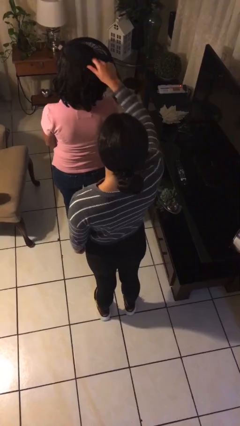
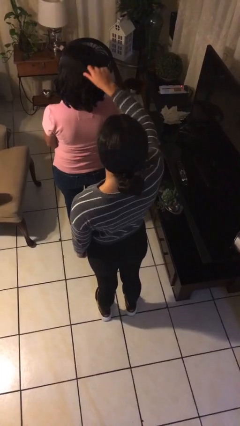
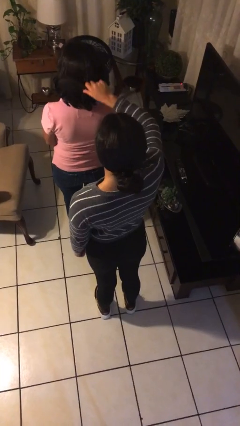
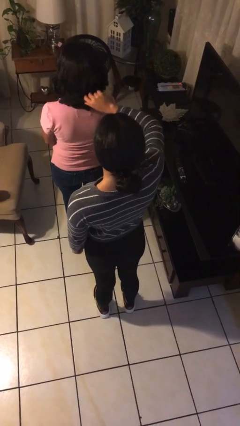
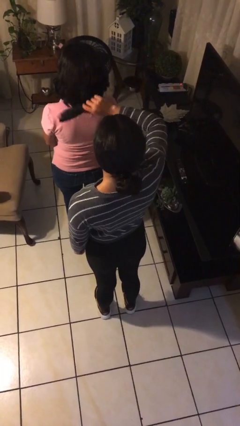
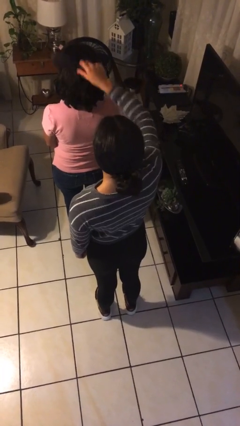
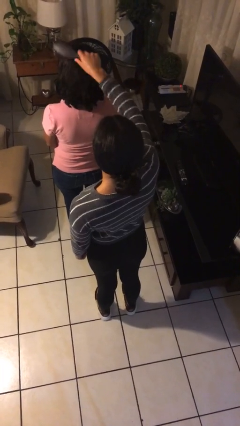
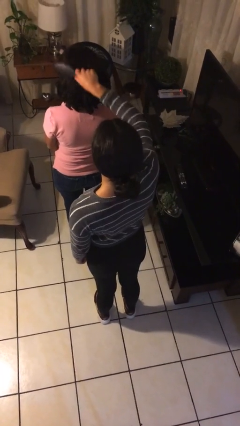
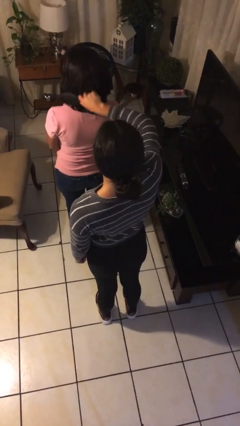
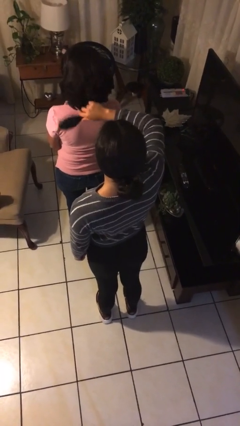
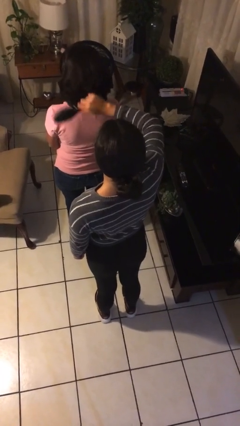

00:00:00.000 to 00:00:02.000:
person brushes hair of person

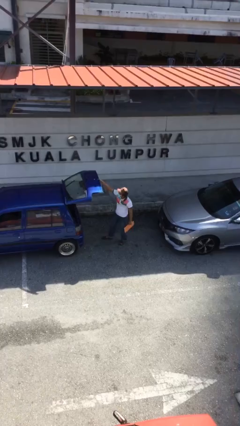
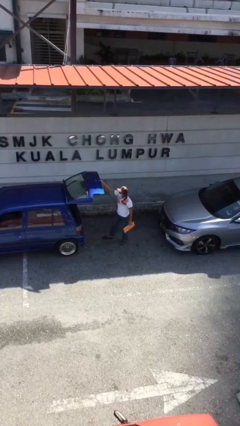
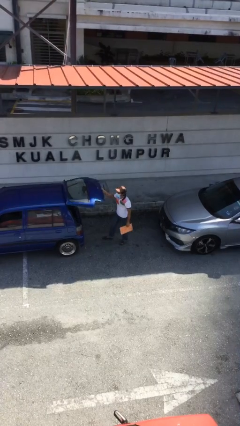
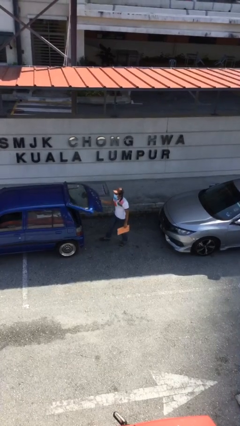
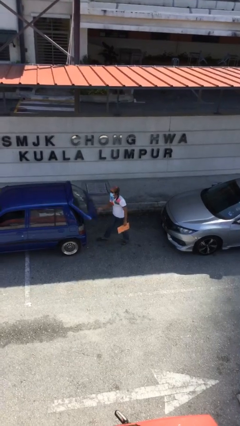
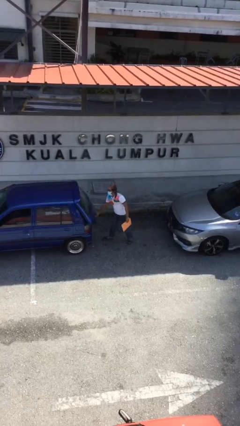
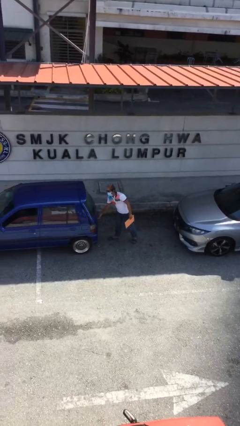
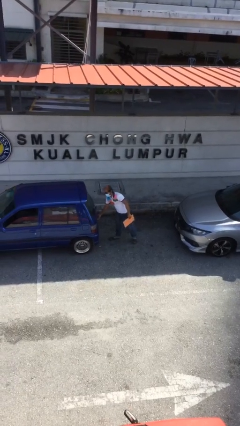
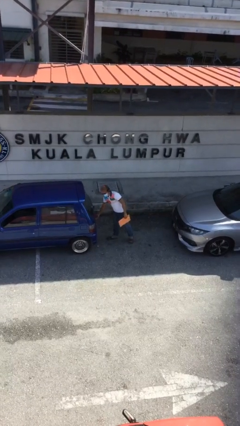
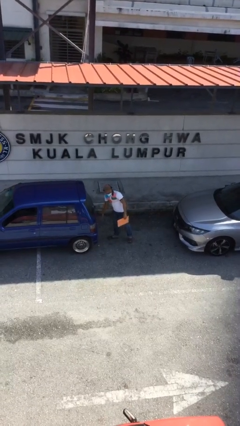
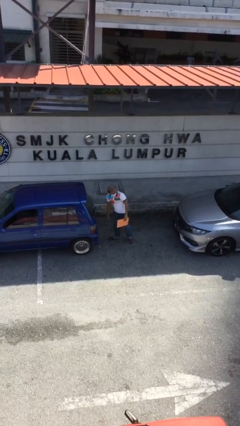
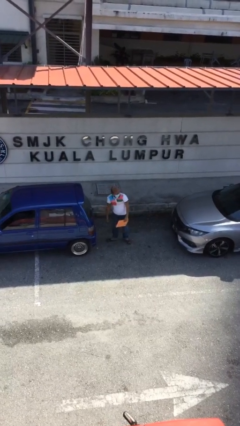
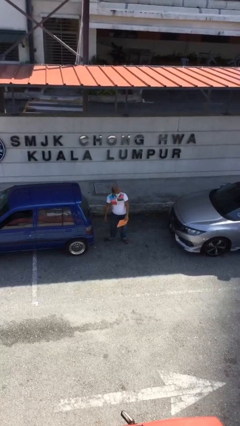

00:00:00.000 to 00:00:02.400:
person closes car trunk

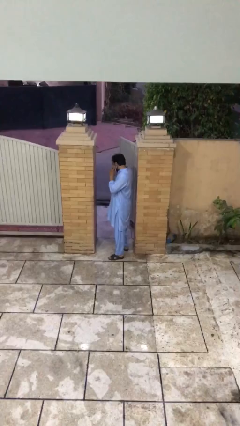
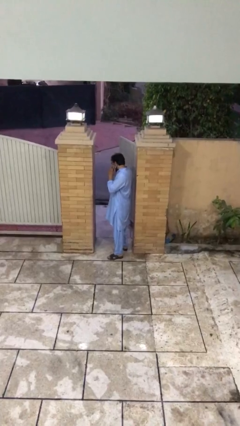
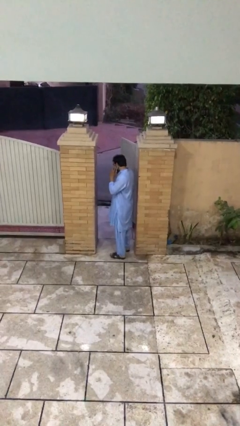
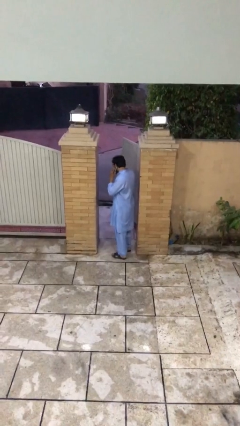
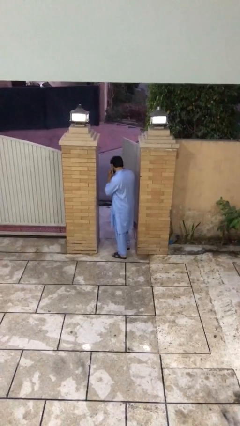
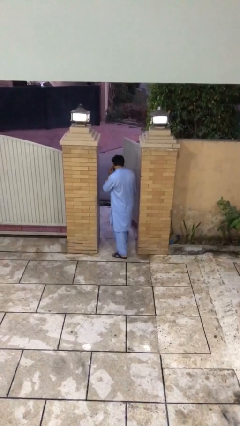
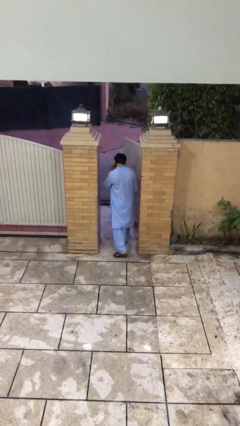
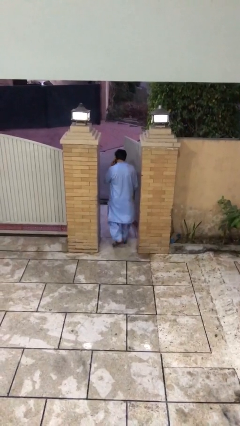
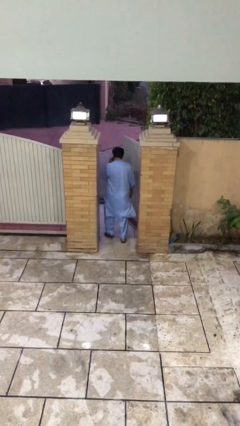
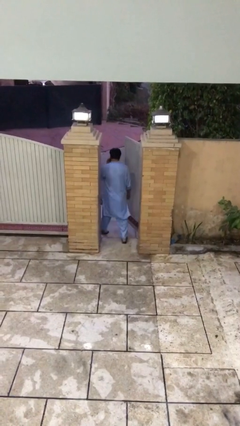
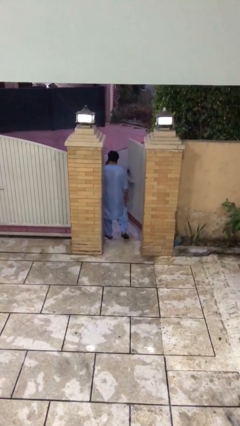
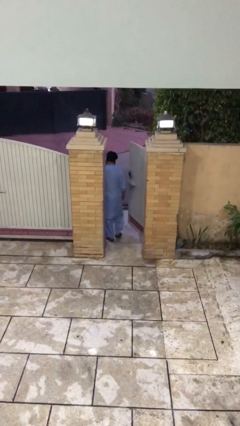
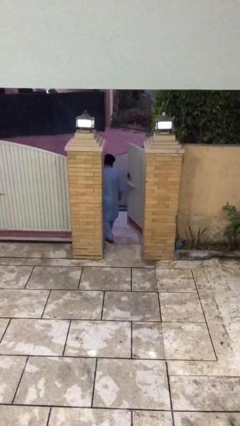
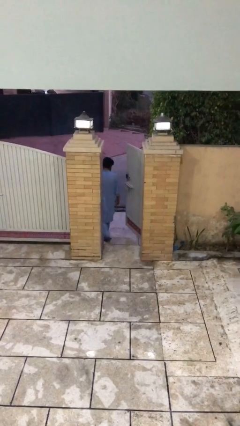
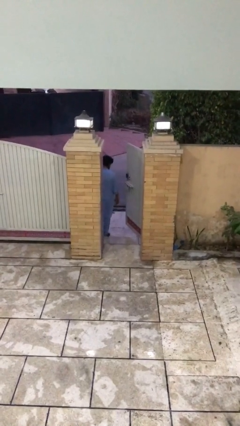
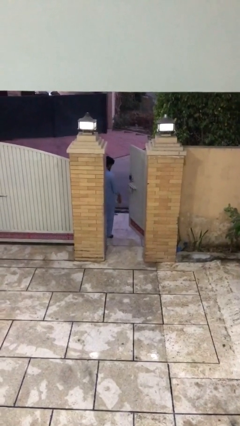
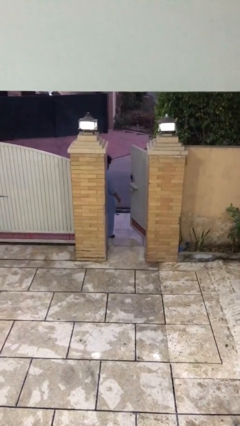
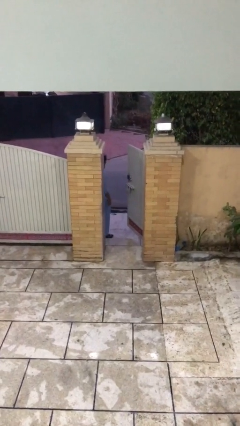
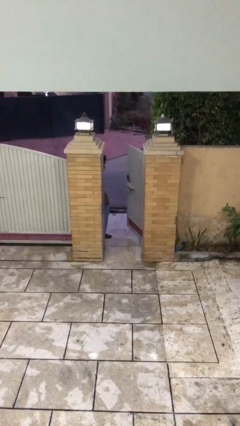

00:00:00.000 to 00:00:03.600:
person exits scene through structure

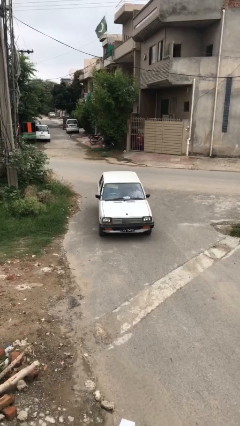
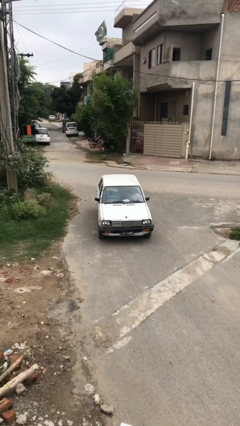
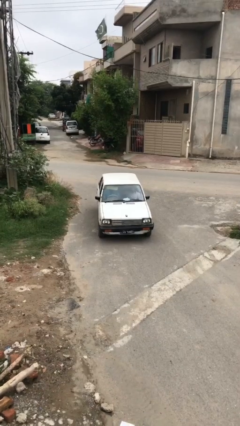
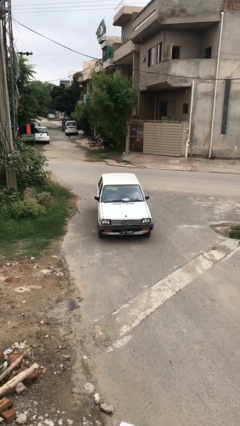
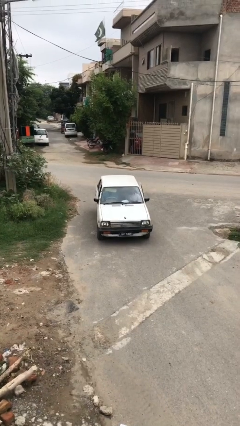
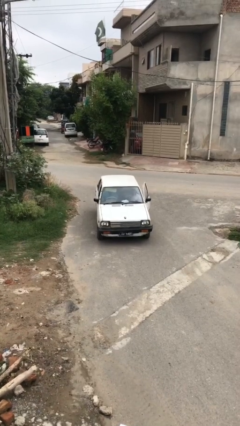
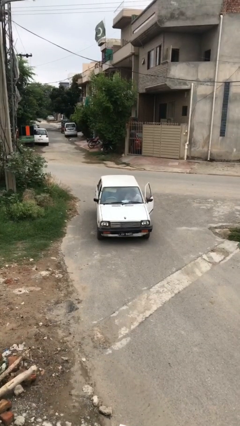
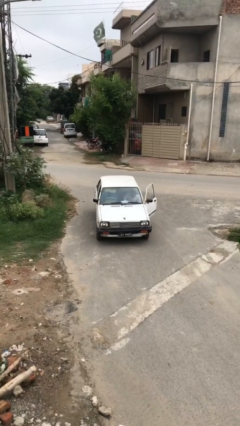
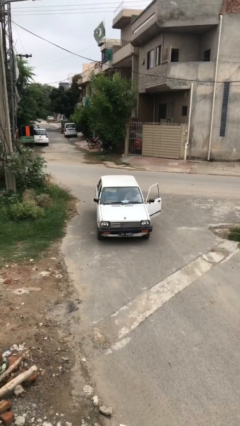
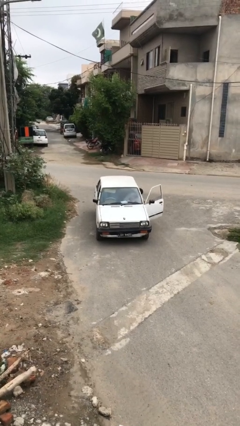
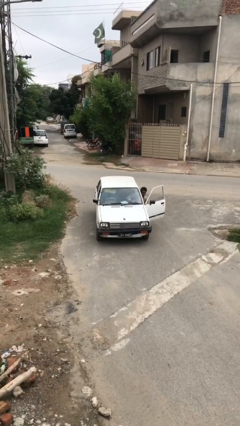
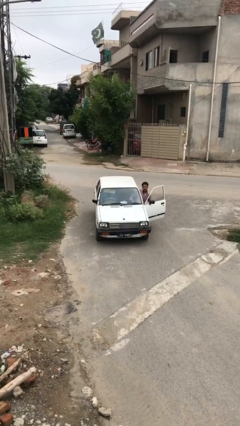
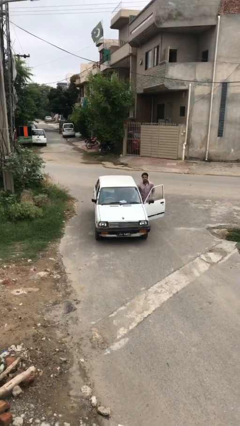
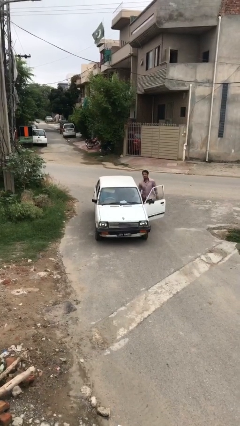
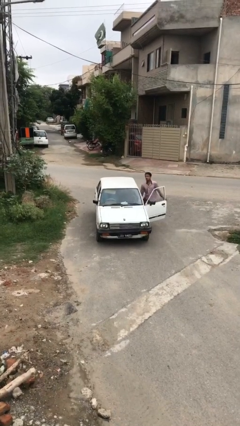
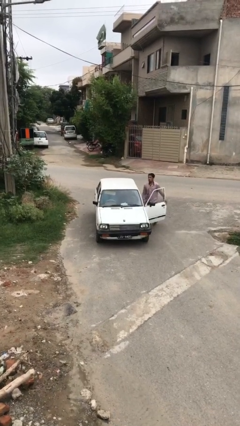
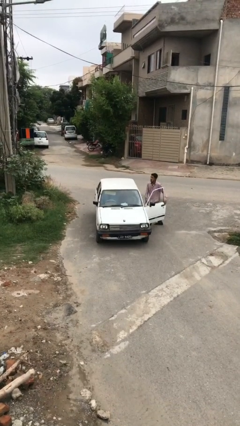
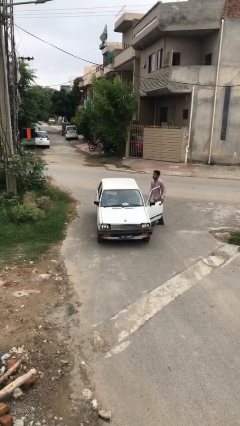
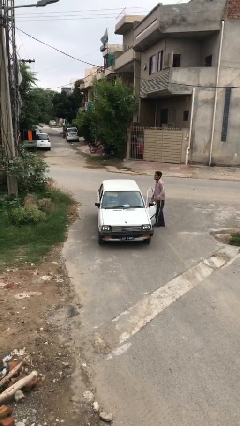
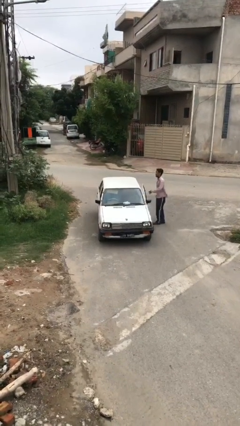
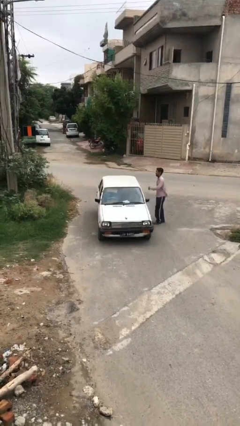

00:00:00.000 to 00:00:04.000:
car drops off person

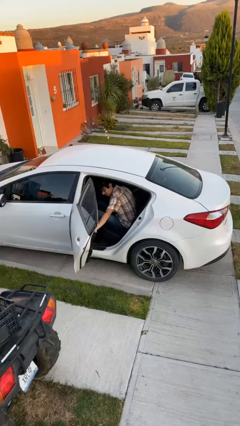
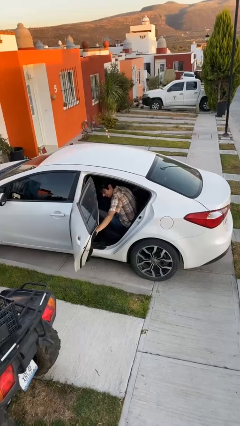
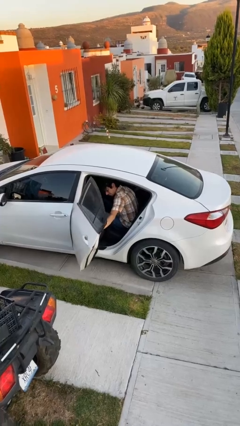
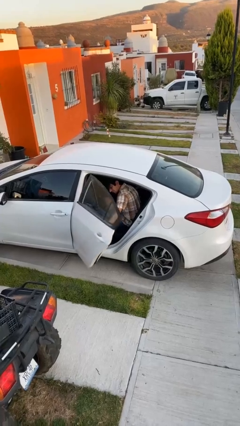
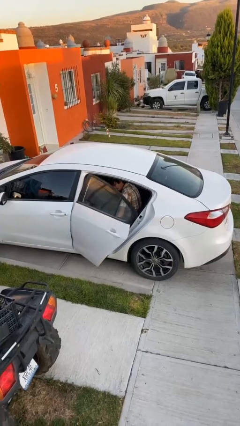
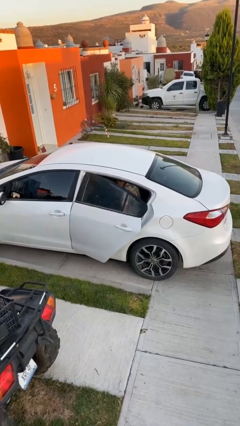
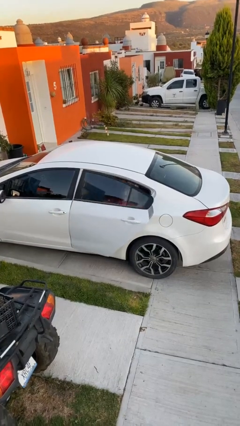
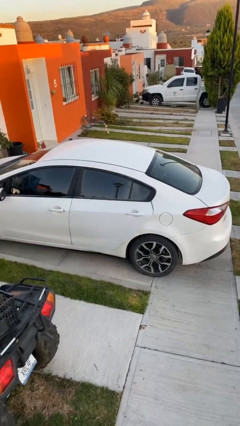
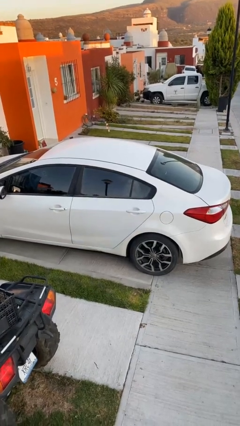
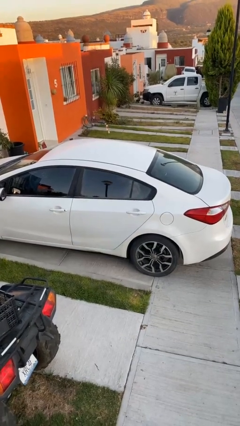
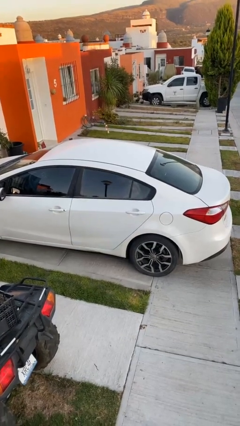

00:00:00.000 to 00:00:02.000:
person closes car door

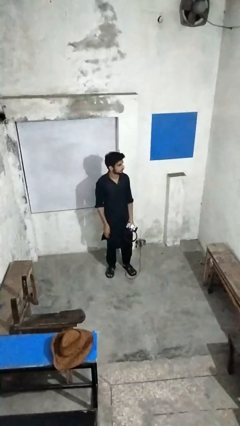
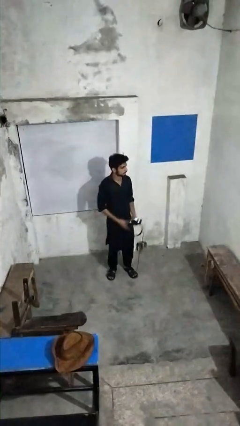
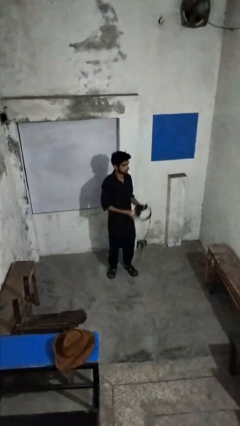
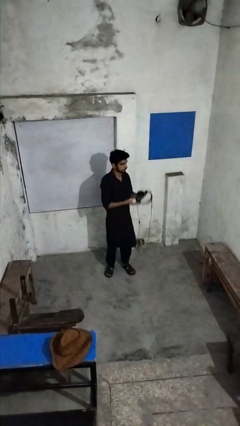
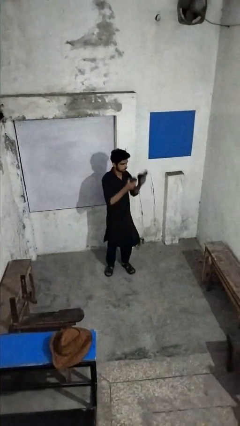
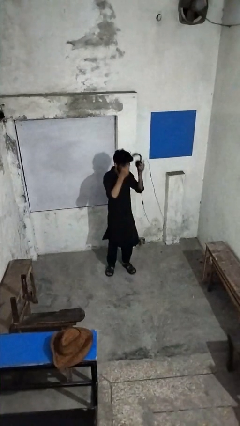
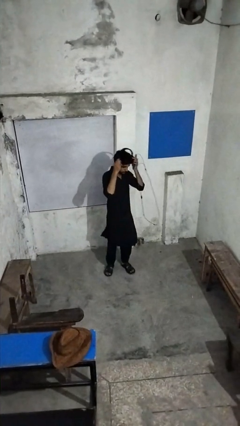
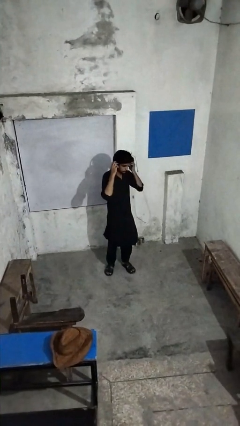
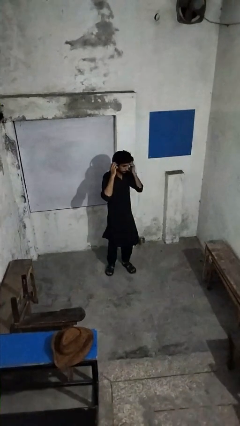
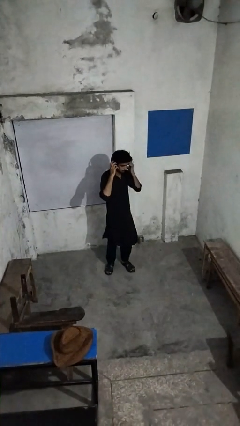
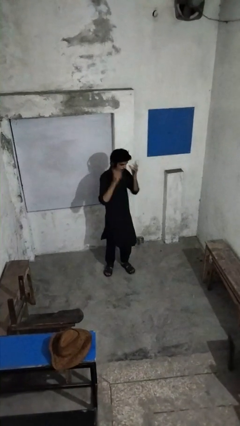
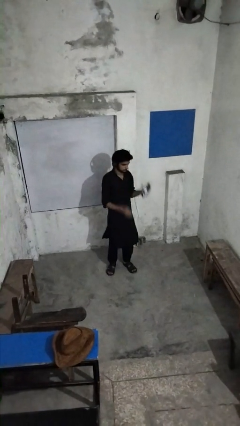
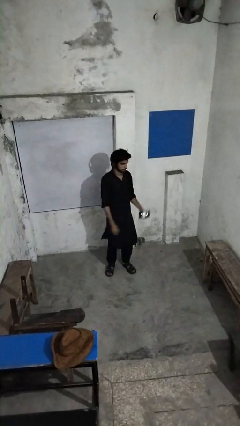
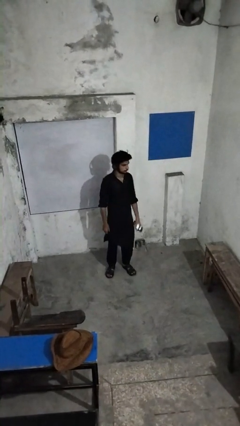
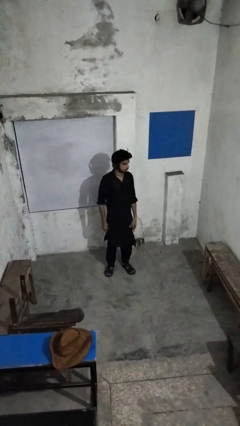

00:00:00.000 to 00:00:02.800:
person puts on headphones
